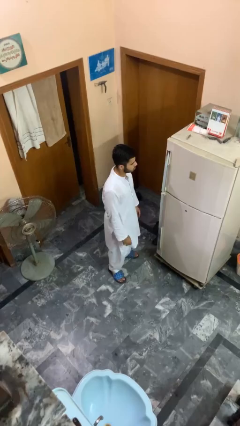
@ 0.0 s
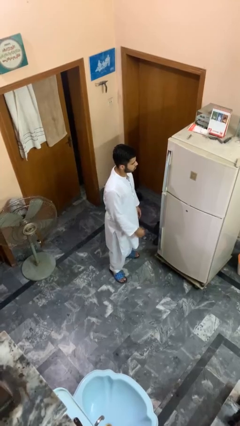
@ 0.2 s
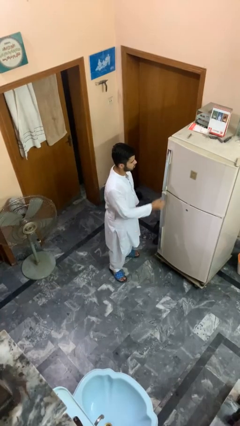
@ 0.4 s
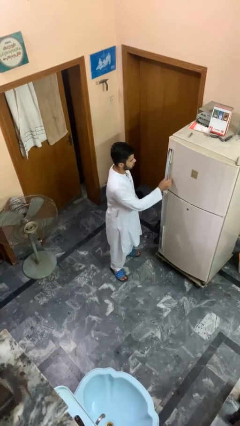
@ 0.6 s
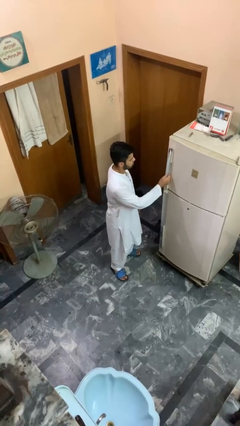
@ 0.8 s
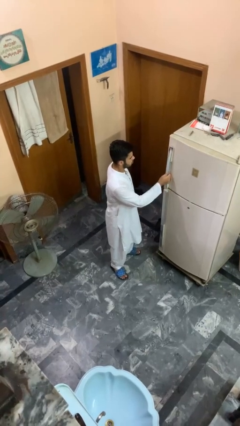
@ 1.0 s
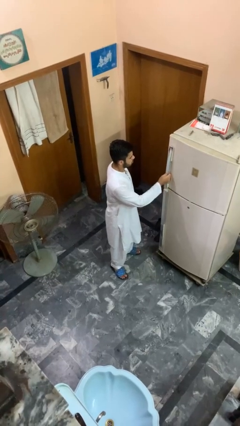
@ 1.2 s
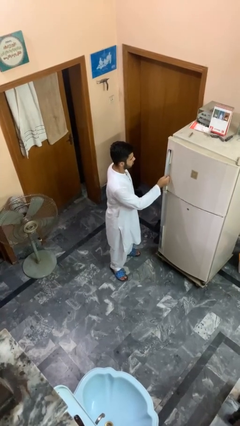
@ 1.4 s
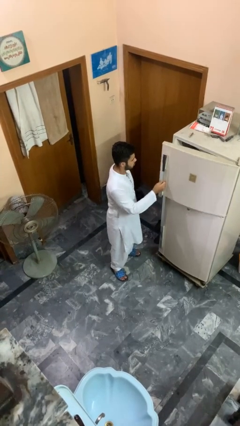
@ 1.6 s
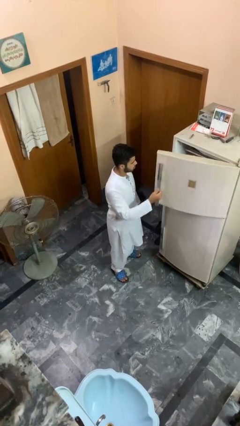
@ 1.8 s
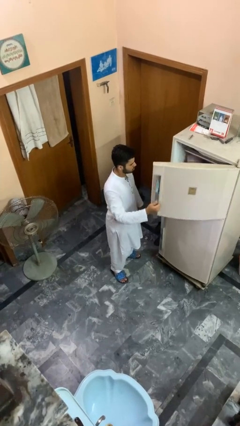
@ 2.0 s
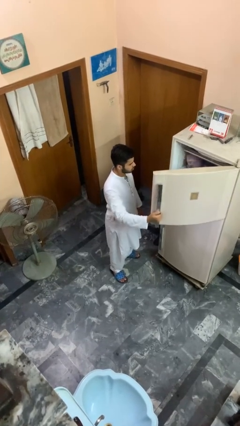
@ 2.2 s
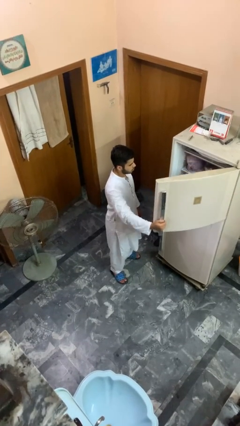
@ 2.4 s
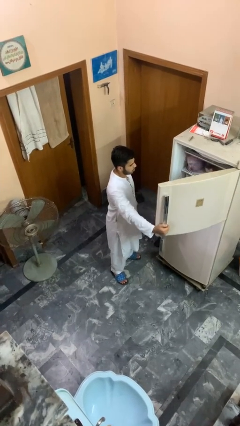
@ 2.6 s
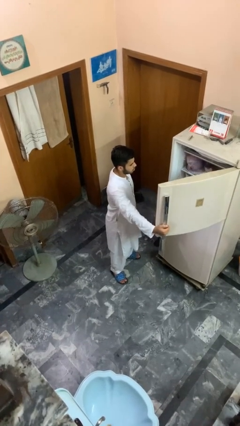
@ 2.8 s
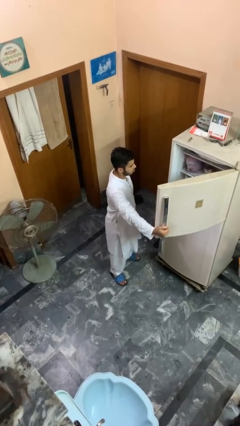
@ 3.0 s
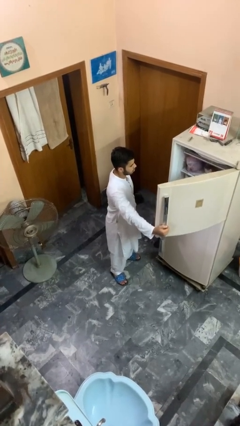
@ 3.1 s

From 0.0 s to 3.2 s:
person opens refrigerator

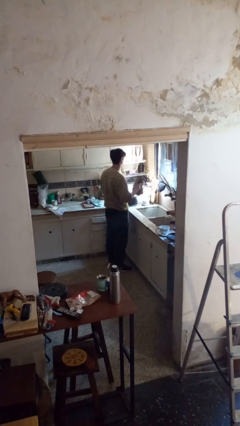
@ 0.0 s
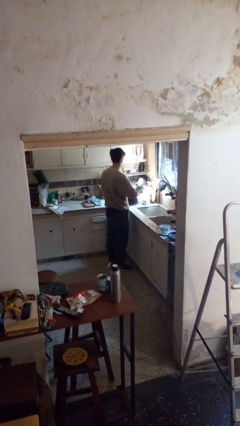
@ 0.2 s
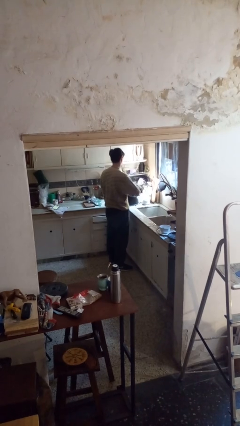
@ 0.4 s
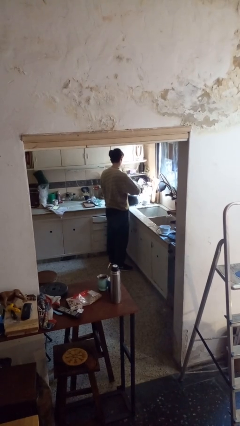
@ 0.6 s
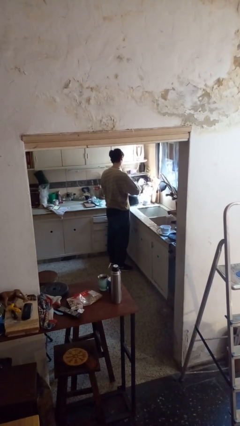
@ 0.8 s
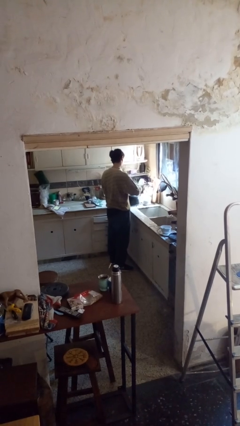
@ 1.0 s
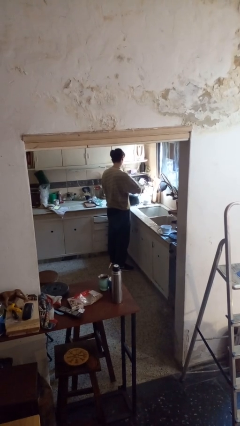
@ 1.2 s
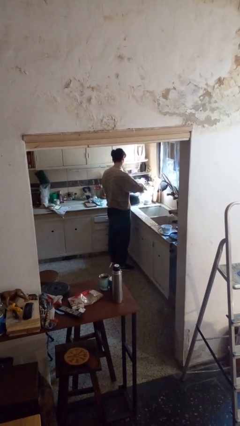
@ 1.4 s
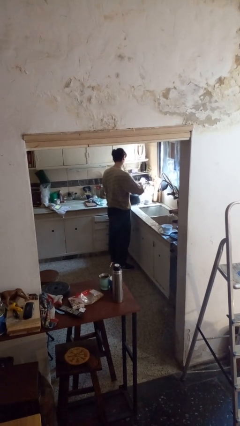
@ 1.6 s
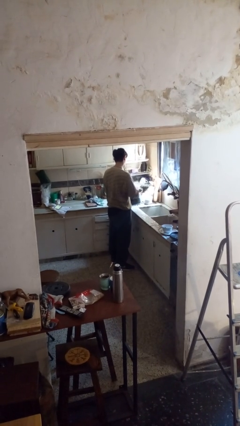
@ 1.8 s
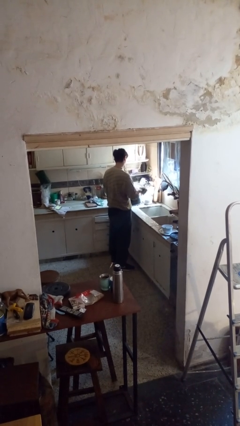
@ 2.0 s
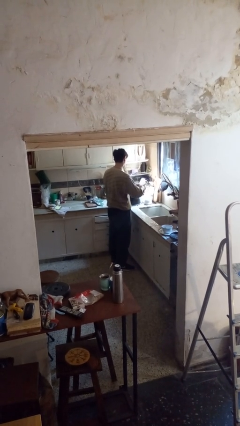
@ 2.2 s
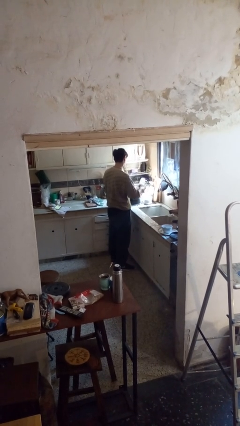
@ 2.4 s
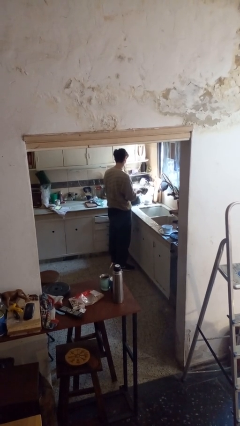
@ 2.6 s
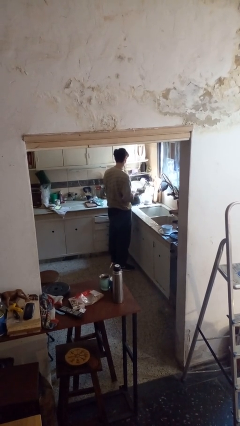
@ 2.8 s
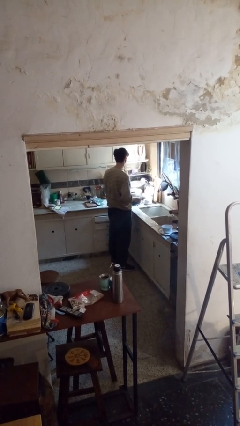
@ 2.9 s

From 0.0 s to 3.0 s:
person dries dish

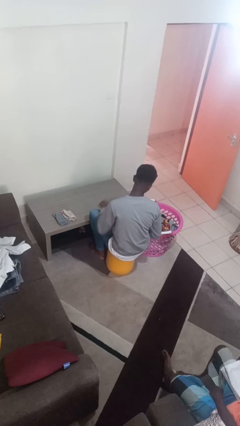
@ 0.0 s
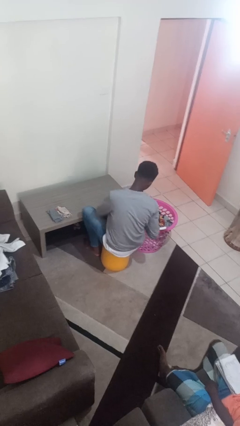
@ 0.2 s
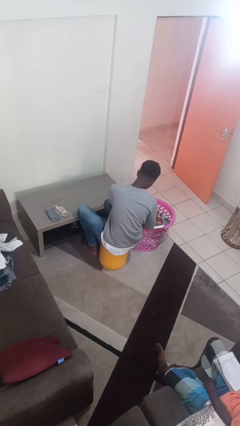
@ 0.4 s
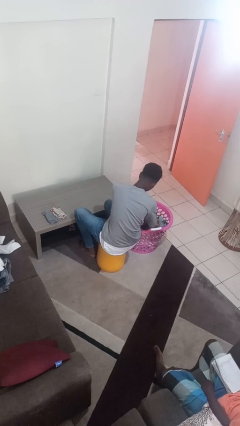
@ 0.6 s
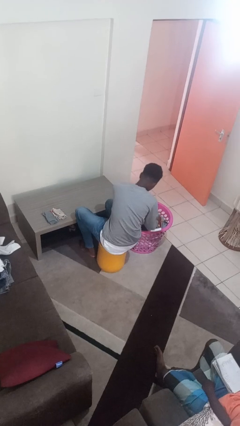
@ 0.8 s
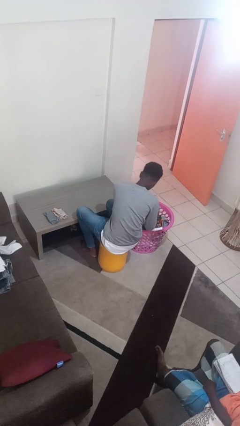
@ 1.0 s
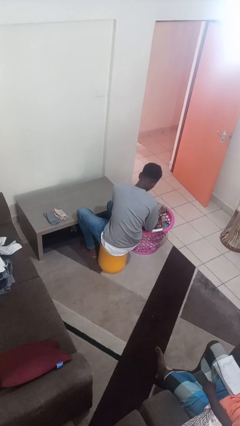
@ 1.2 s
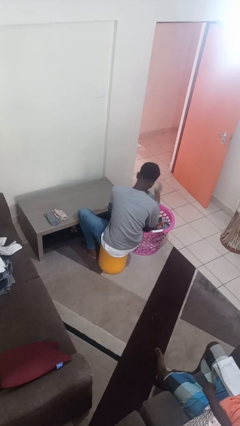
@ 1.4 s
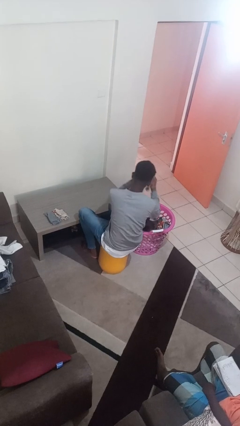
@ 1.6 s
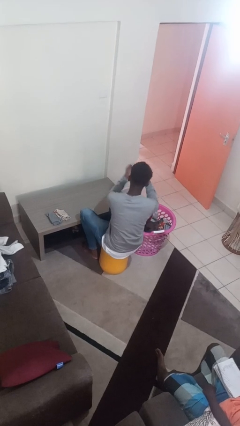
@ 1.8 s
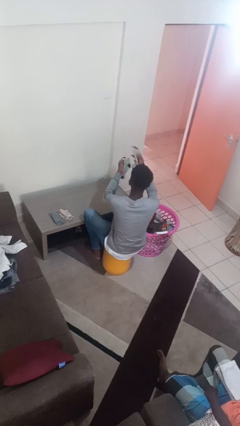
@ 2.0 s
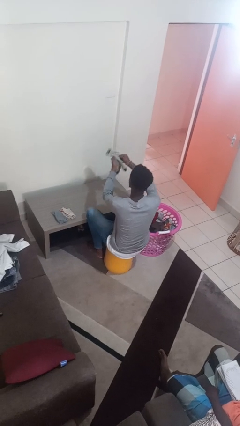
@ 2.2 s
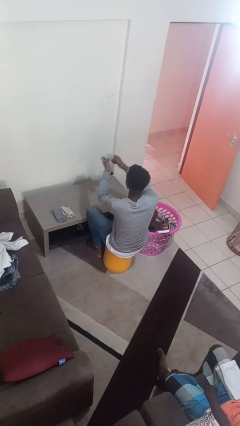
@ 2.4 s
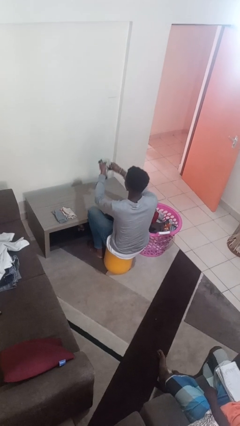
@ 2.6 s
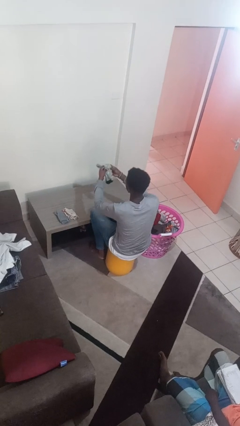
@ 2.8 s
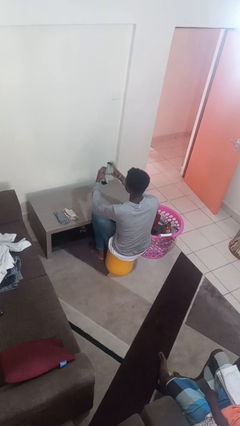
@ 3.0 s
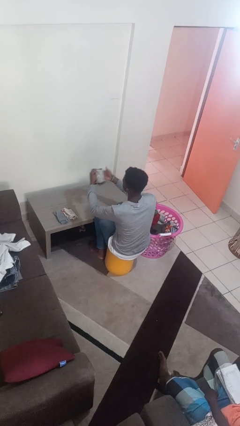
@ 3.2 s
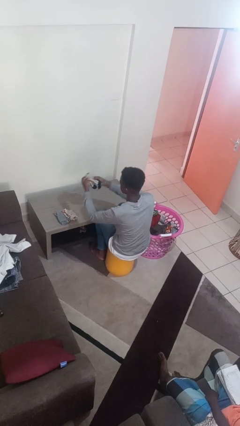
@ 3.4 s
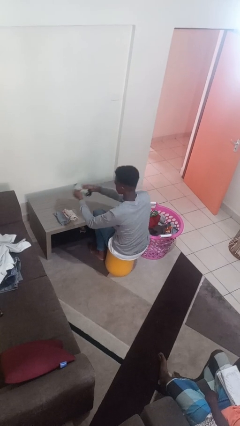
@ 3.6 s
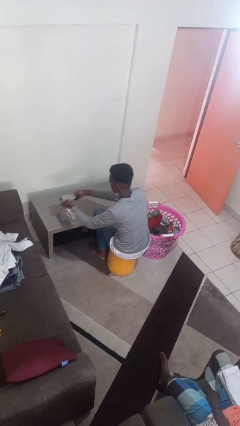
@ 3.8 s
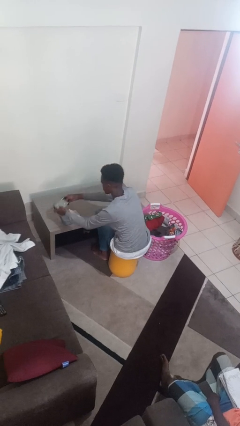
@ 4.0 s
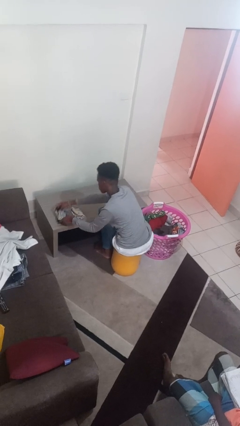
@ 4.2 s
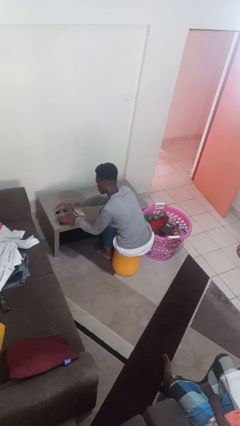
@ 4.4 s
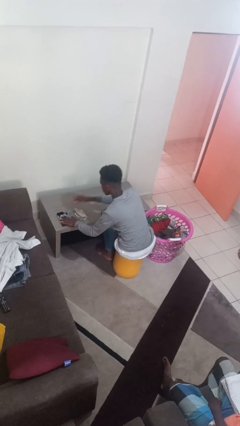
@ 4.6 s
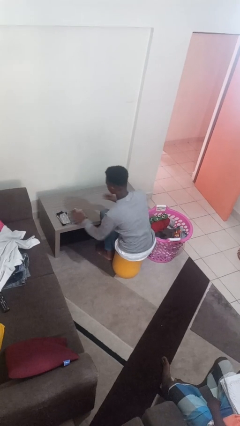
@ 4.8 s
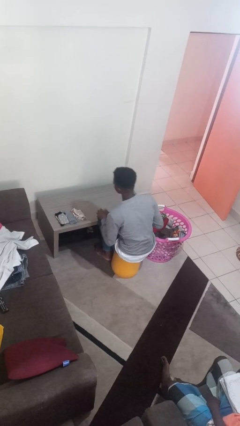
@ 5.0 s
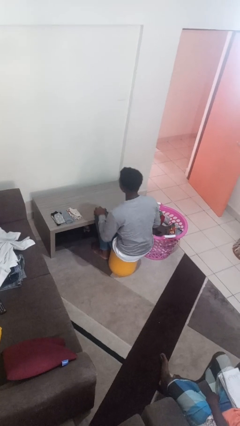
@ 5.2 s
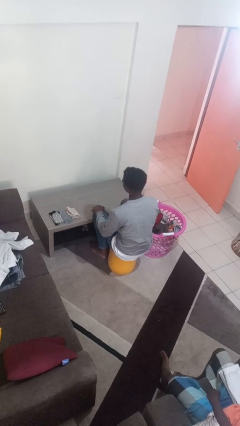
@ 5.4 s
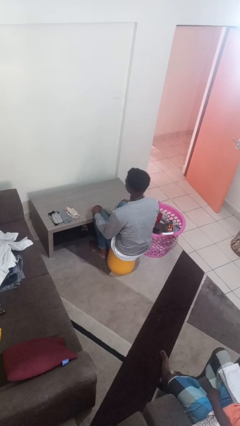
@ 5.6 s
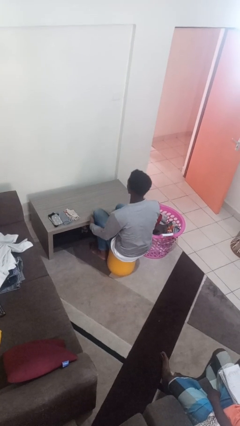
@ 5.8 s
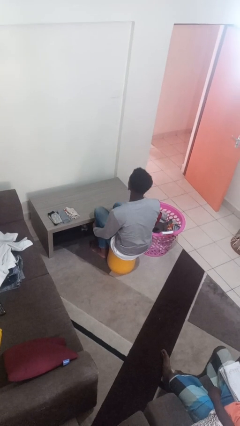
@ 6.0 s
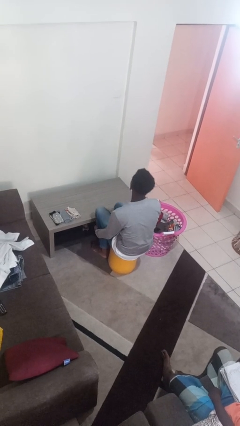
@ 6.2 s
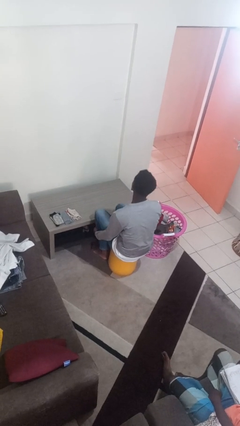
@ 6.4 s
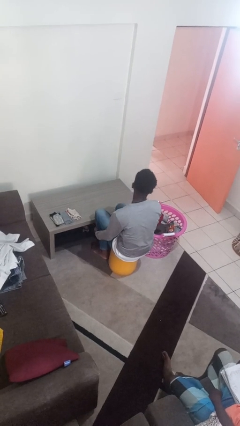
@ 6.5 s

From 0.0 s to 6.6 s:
person folds socks

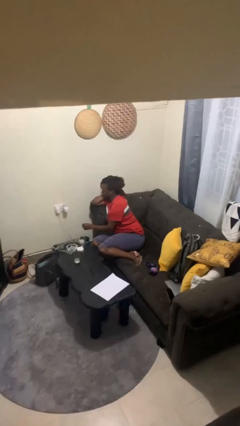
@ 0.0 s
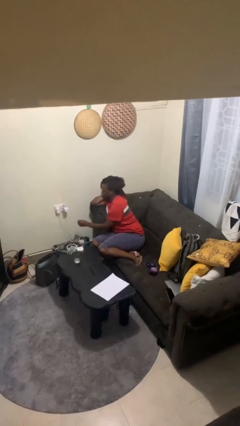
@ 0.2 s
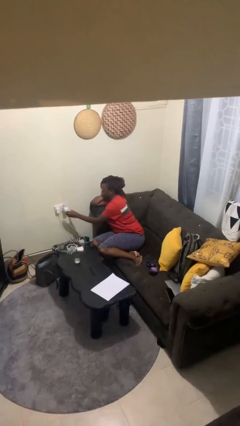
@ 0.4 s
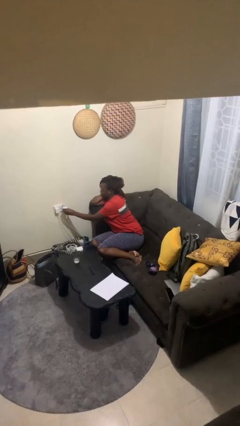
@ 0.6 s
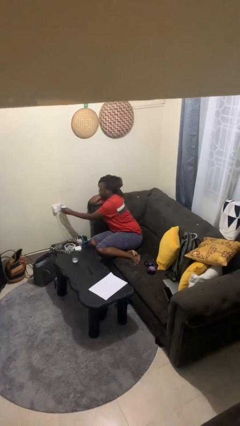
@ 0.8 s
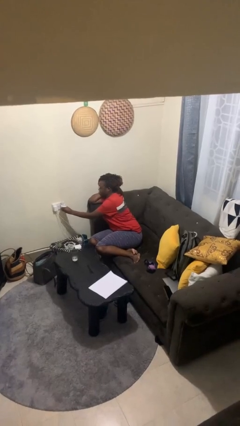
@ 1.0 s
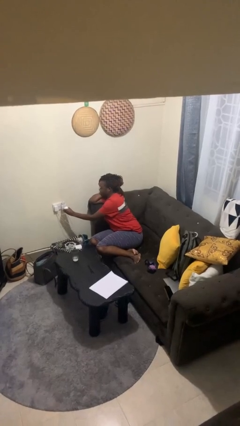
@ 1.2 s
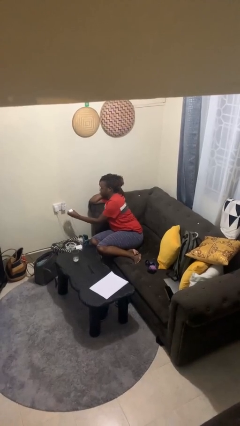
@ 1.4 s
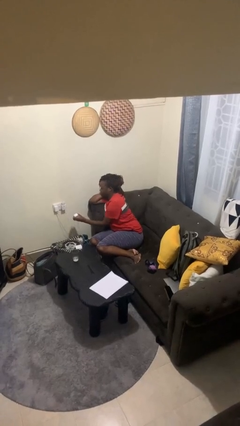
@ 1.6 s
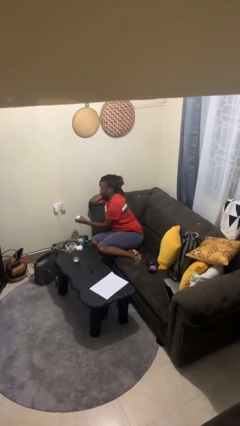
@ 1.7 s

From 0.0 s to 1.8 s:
person unplugs from electrical socket

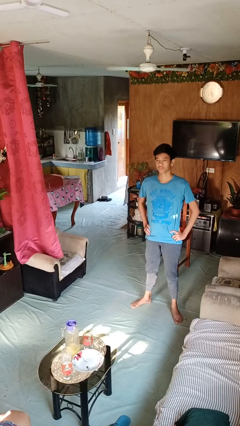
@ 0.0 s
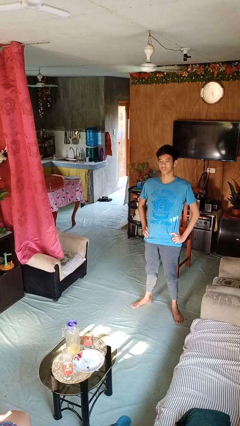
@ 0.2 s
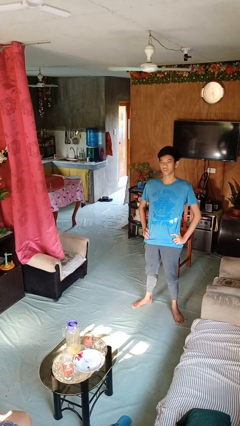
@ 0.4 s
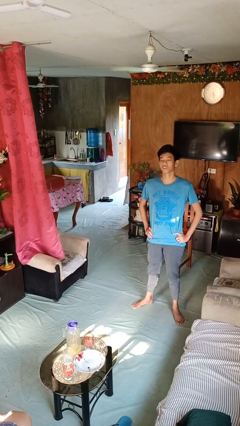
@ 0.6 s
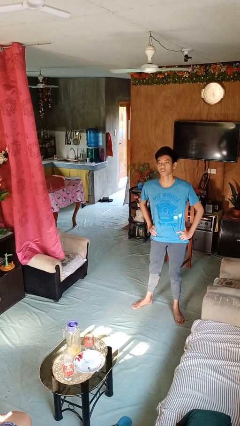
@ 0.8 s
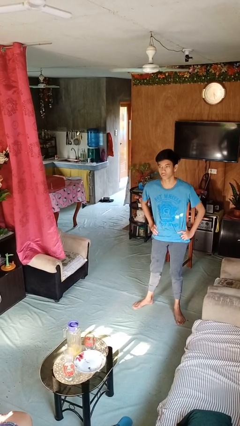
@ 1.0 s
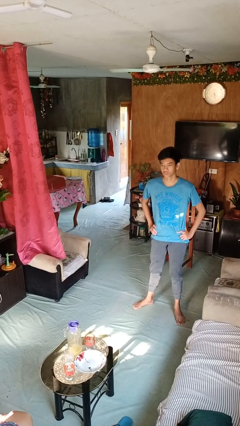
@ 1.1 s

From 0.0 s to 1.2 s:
person wiggles hips

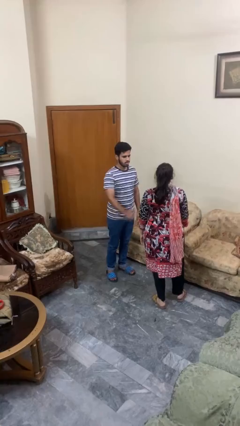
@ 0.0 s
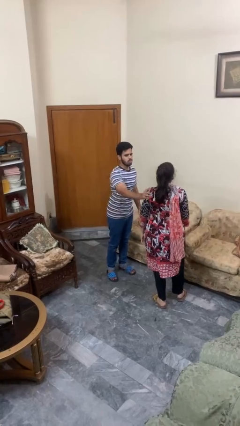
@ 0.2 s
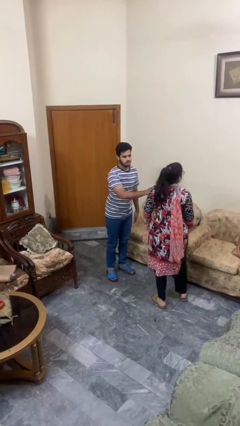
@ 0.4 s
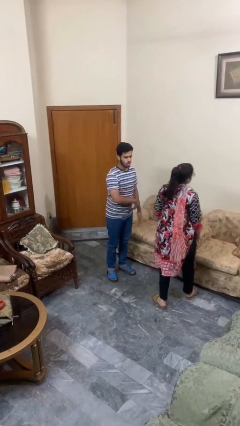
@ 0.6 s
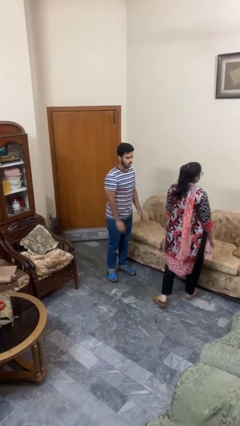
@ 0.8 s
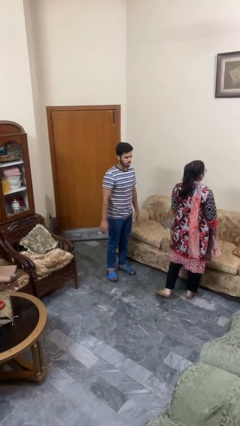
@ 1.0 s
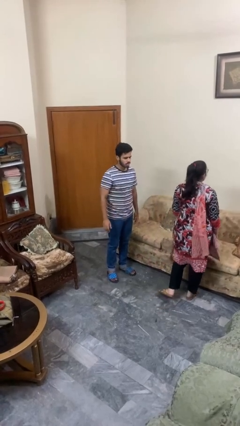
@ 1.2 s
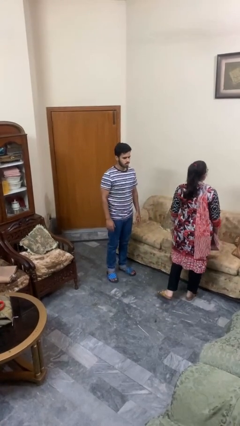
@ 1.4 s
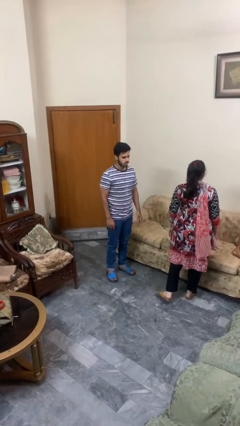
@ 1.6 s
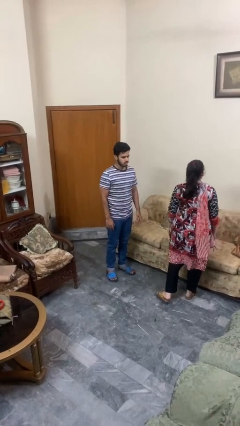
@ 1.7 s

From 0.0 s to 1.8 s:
person shoves person
